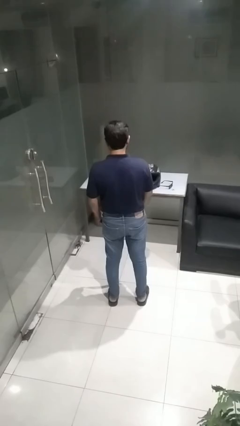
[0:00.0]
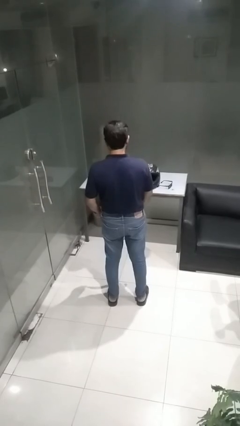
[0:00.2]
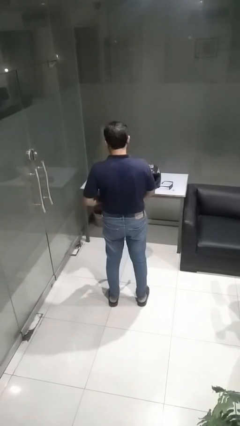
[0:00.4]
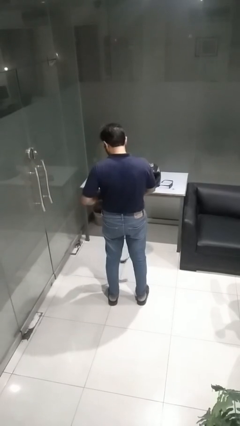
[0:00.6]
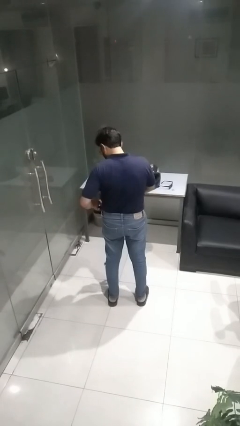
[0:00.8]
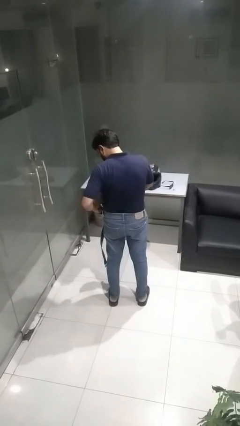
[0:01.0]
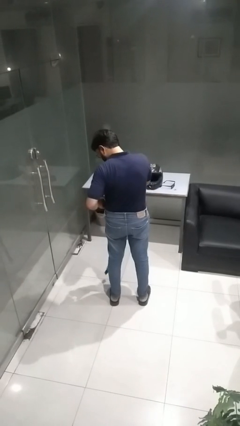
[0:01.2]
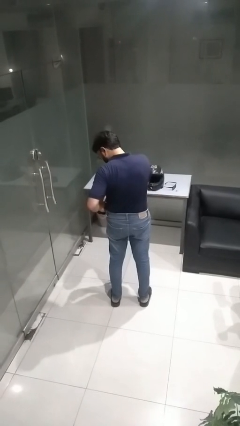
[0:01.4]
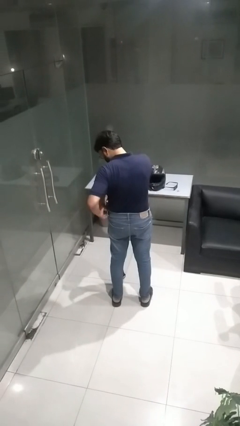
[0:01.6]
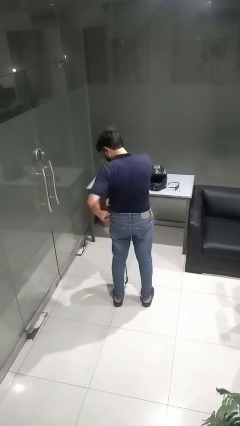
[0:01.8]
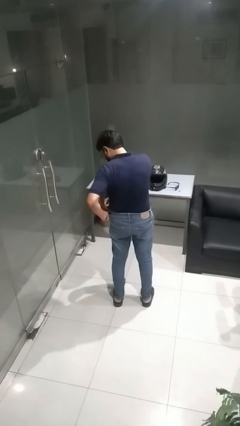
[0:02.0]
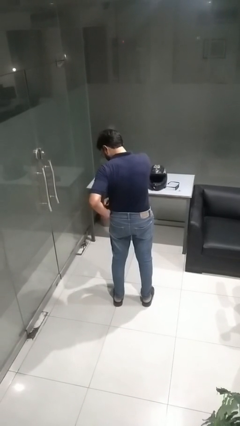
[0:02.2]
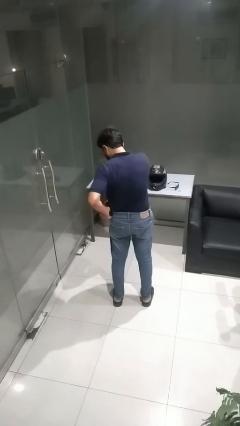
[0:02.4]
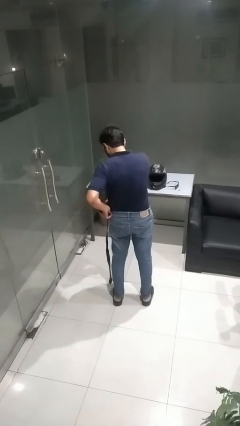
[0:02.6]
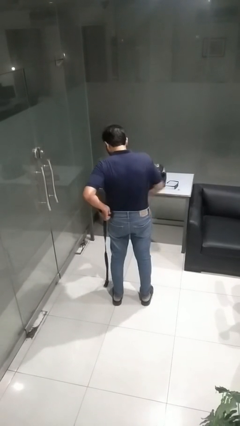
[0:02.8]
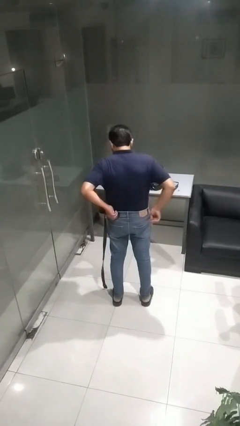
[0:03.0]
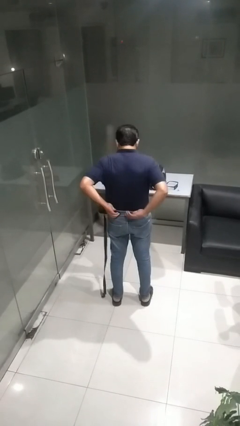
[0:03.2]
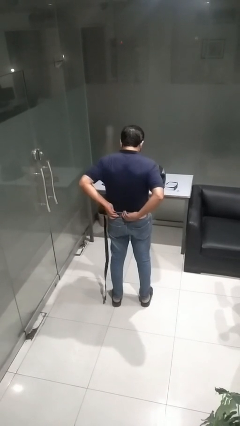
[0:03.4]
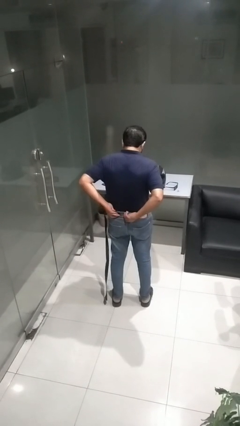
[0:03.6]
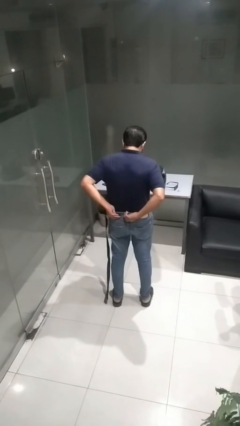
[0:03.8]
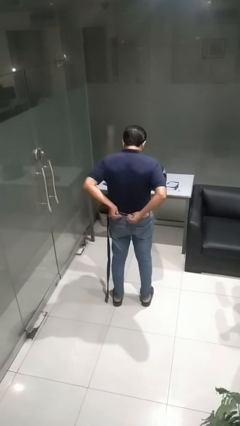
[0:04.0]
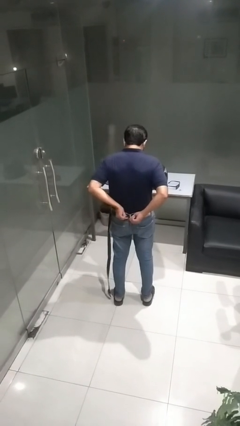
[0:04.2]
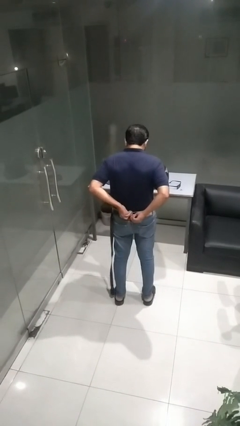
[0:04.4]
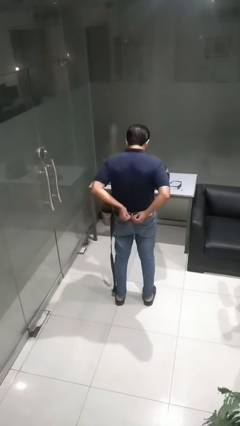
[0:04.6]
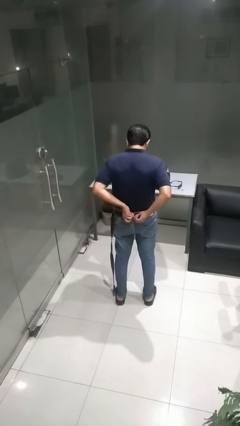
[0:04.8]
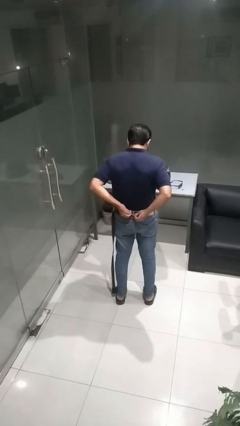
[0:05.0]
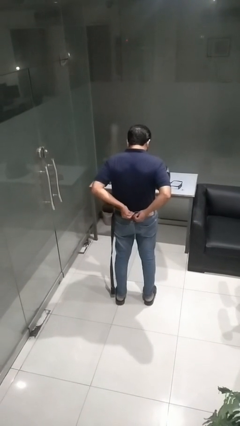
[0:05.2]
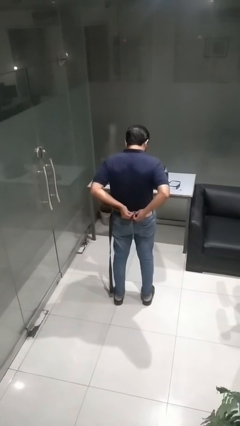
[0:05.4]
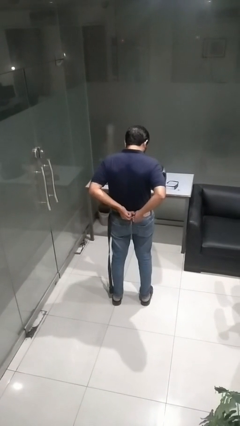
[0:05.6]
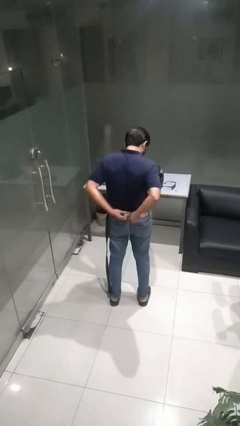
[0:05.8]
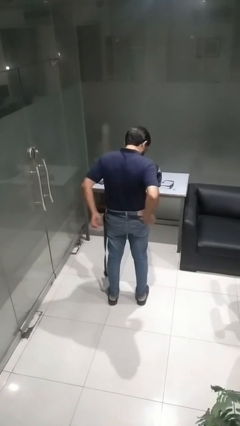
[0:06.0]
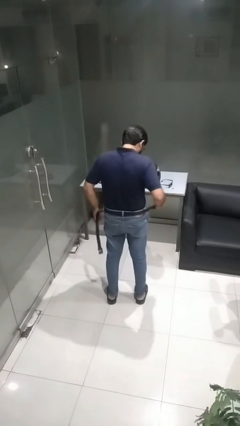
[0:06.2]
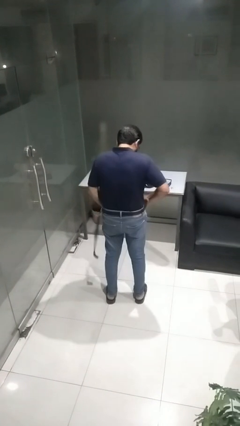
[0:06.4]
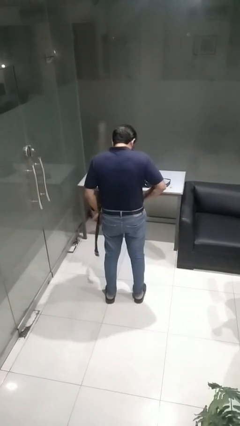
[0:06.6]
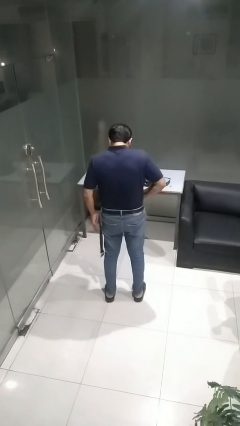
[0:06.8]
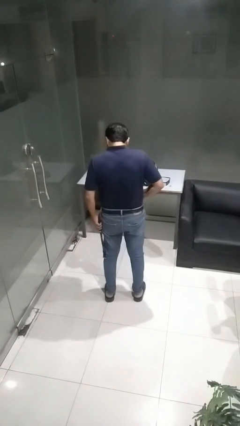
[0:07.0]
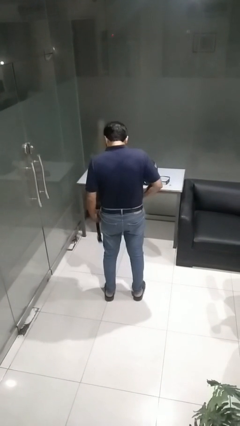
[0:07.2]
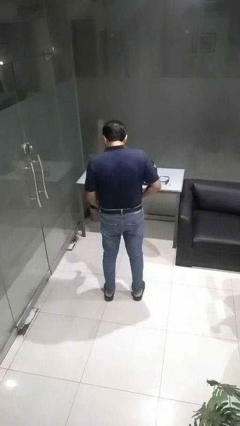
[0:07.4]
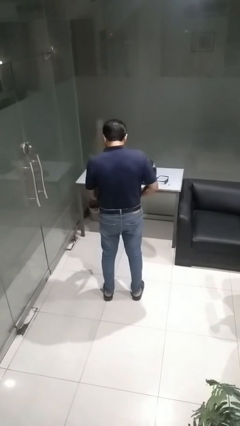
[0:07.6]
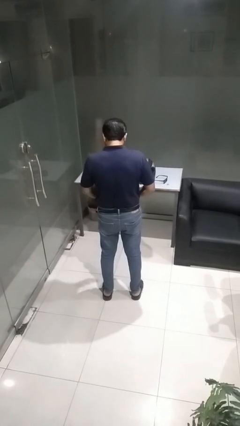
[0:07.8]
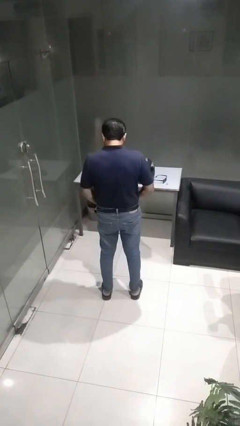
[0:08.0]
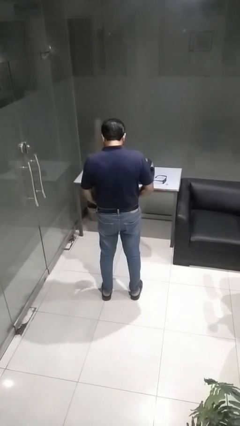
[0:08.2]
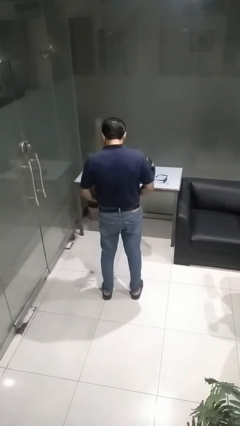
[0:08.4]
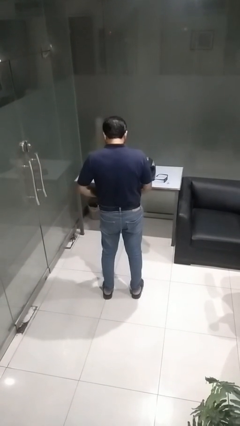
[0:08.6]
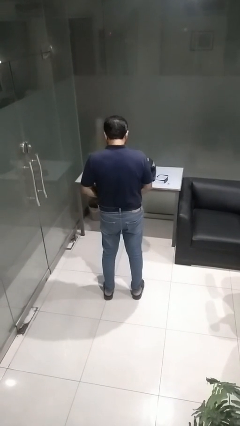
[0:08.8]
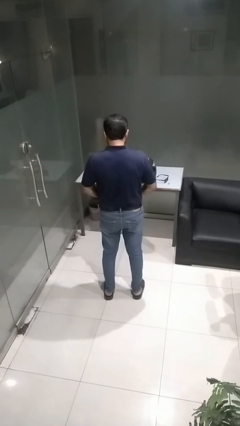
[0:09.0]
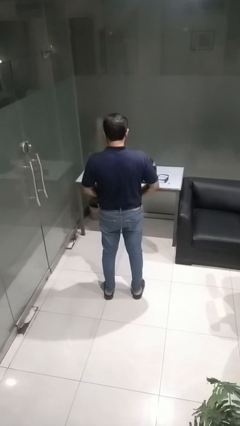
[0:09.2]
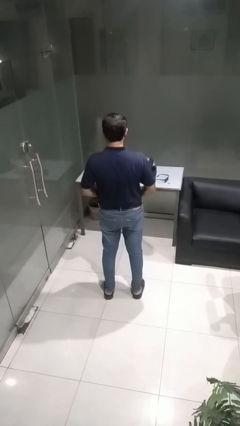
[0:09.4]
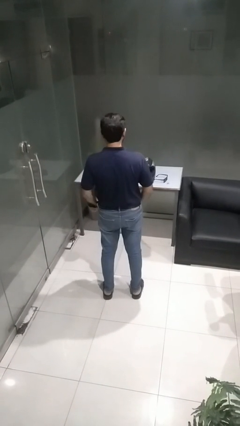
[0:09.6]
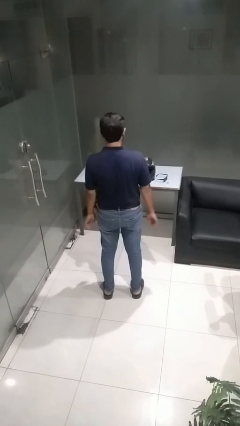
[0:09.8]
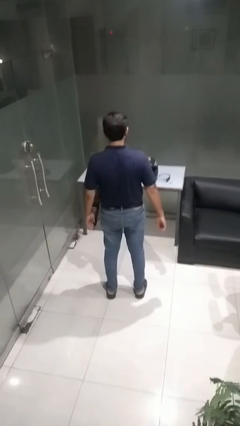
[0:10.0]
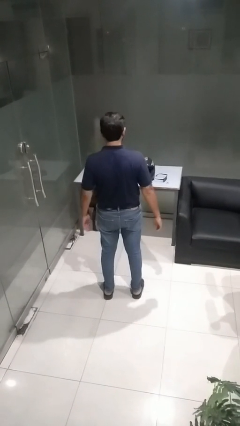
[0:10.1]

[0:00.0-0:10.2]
person puts on belt

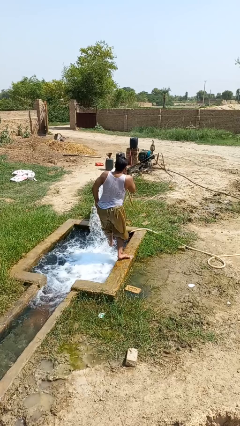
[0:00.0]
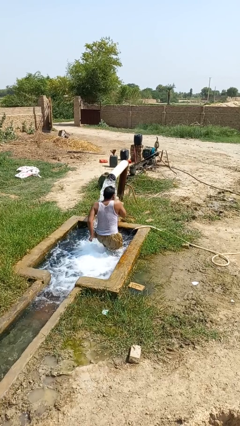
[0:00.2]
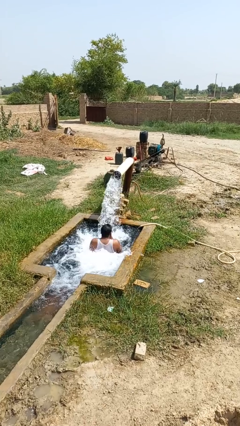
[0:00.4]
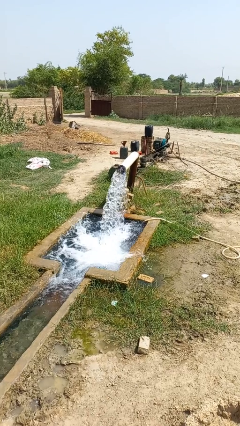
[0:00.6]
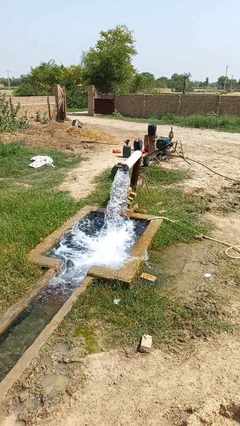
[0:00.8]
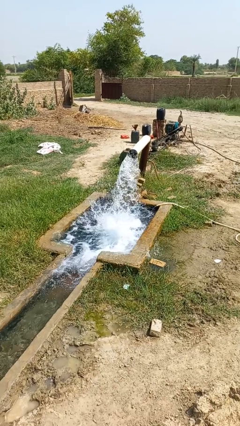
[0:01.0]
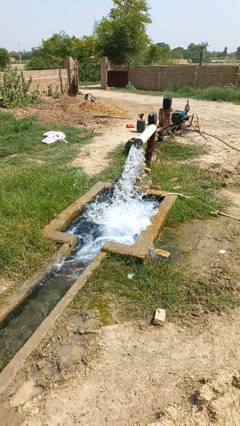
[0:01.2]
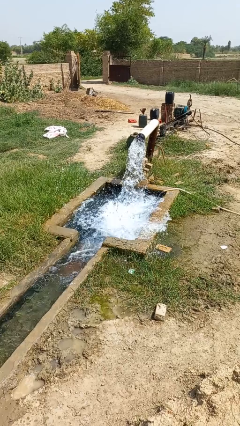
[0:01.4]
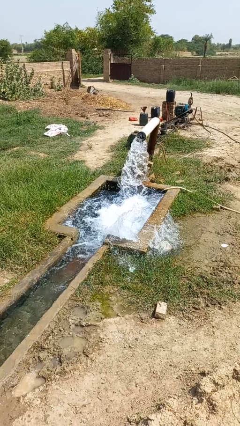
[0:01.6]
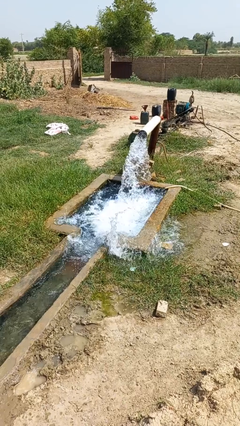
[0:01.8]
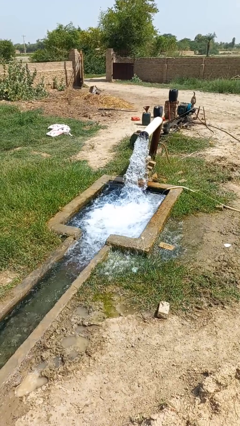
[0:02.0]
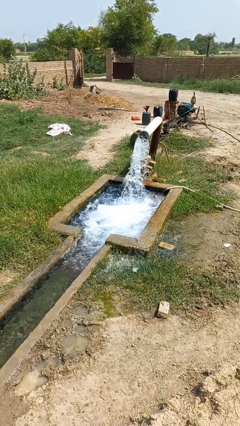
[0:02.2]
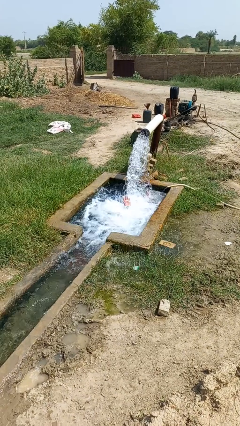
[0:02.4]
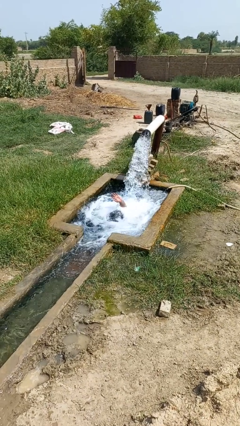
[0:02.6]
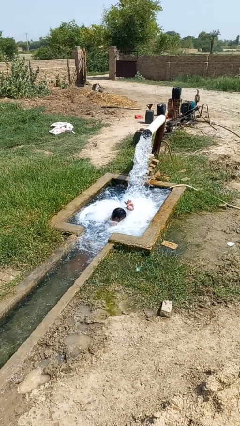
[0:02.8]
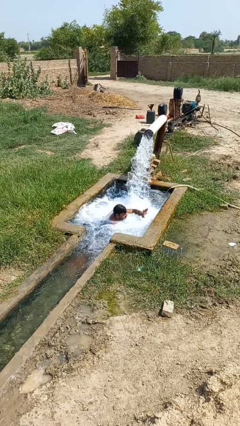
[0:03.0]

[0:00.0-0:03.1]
person falls into pool

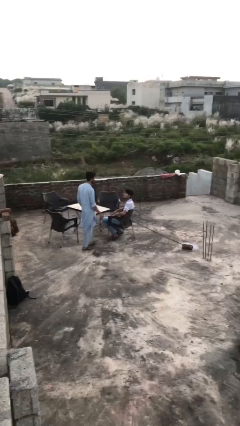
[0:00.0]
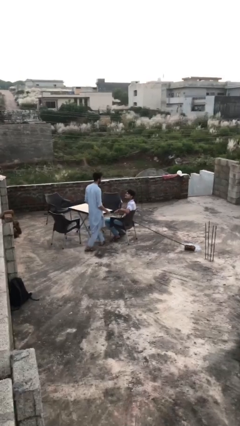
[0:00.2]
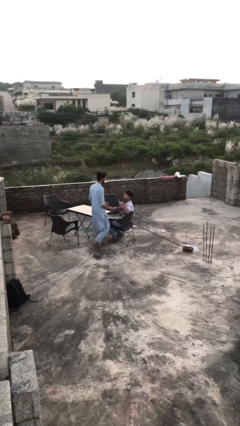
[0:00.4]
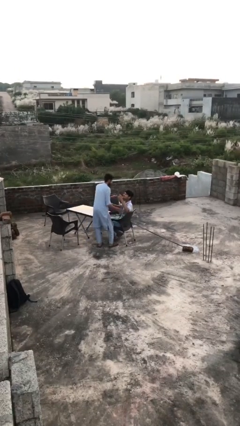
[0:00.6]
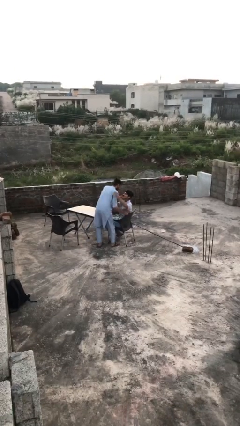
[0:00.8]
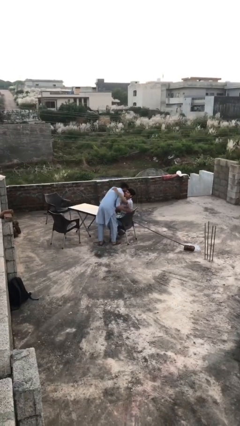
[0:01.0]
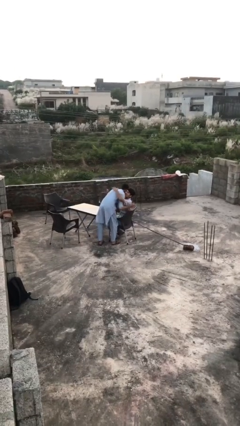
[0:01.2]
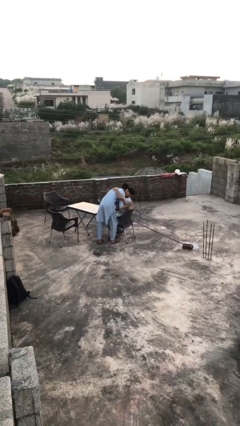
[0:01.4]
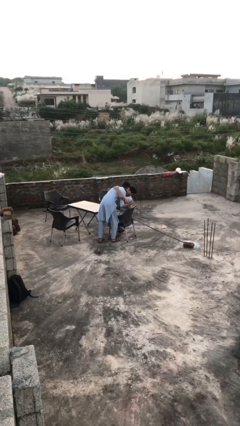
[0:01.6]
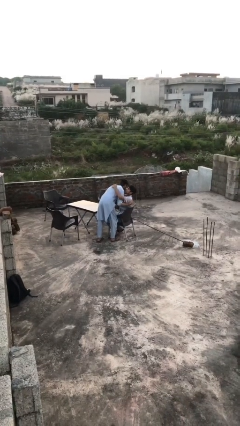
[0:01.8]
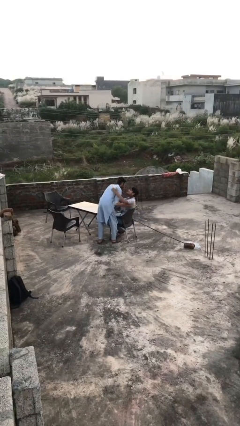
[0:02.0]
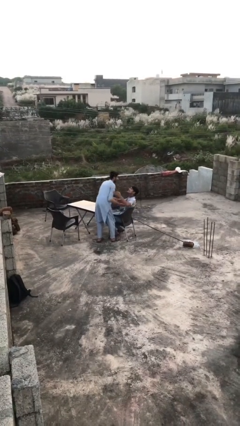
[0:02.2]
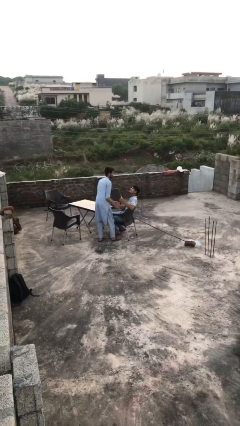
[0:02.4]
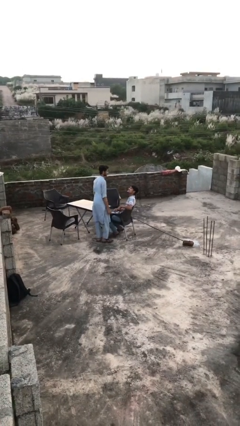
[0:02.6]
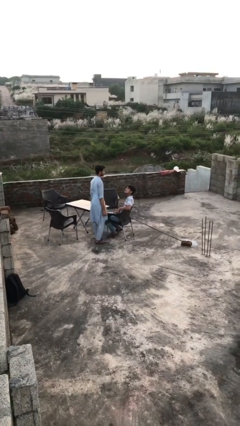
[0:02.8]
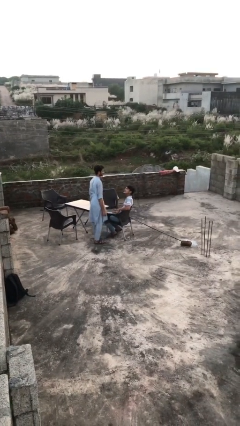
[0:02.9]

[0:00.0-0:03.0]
person embraces person

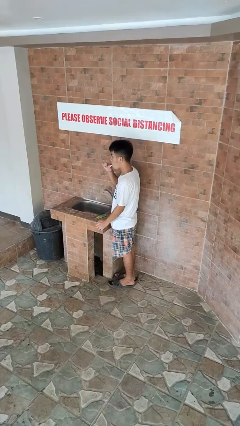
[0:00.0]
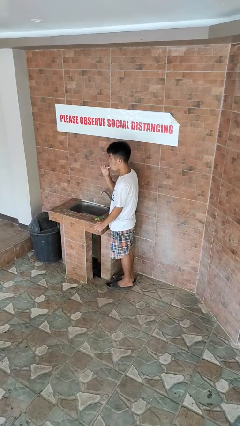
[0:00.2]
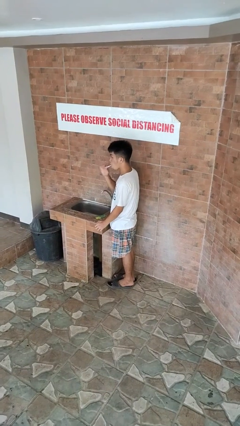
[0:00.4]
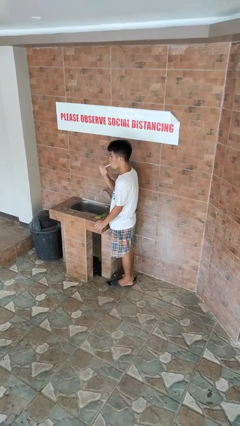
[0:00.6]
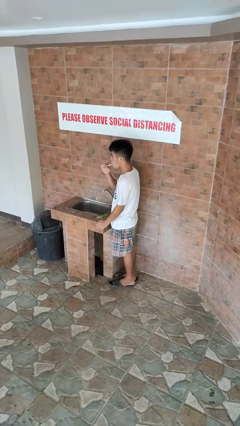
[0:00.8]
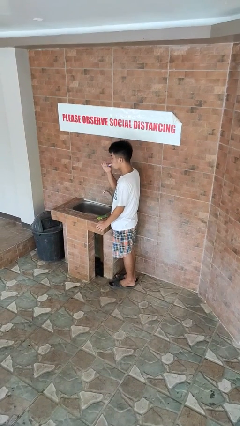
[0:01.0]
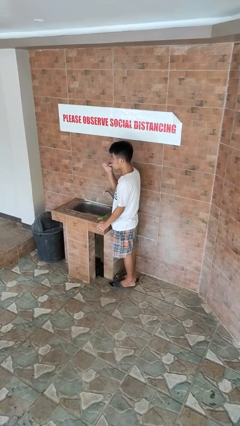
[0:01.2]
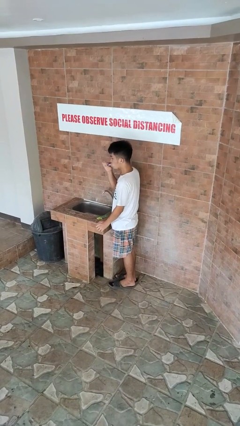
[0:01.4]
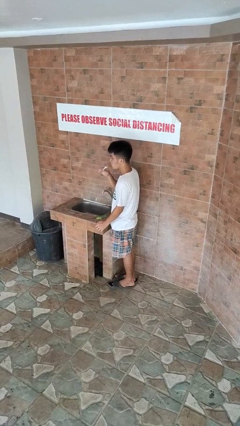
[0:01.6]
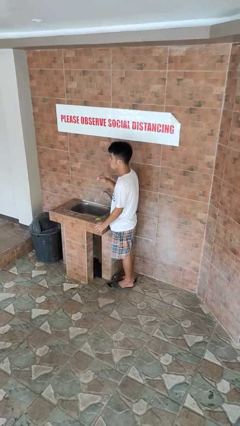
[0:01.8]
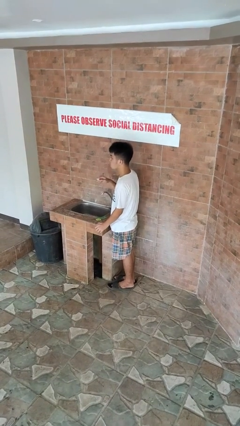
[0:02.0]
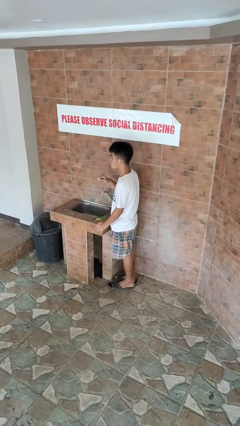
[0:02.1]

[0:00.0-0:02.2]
person brushes teeth
